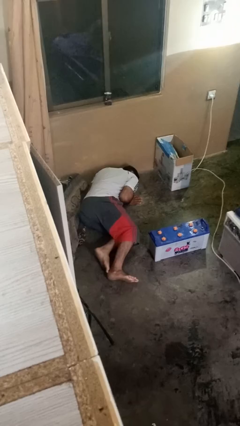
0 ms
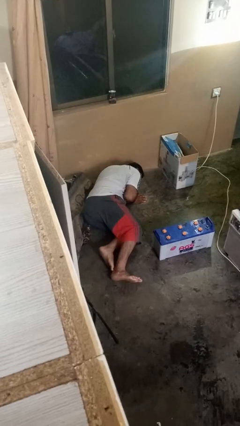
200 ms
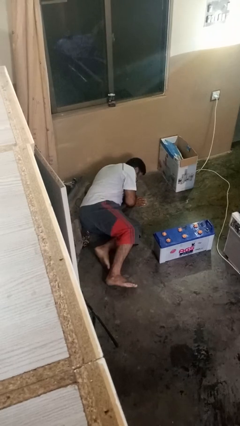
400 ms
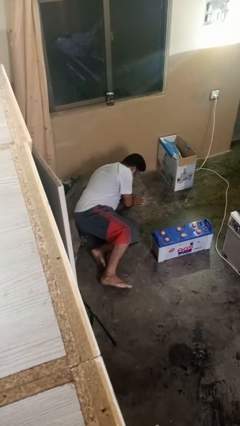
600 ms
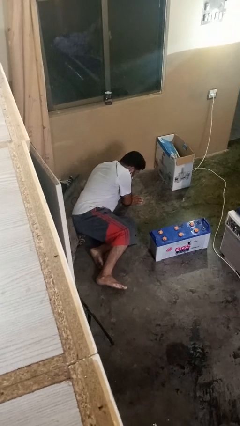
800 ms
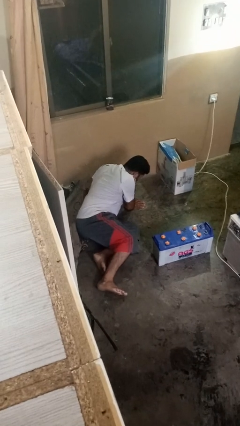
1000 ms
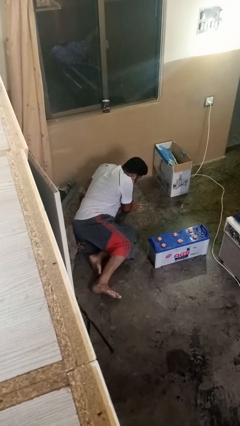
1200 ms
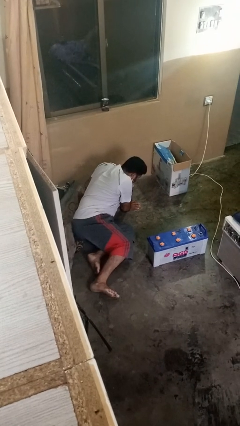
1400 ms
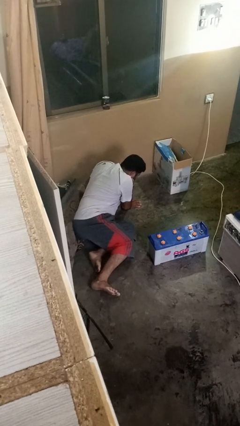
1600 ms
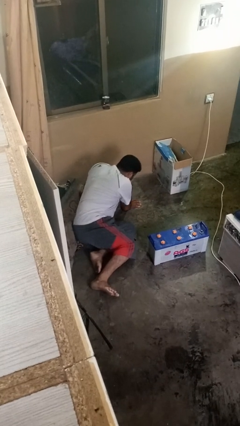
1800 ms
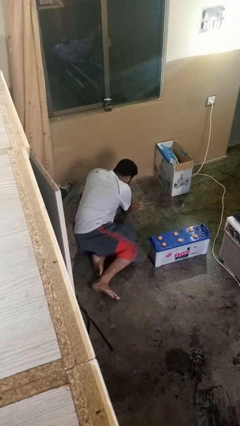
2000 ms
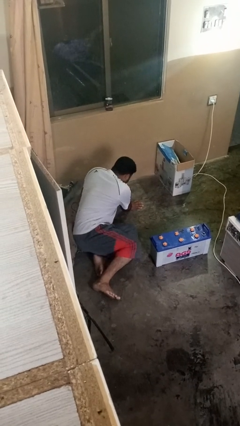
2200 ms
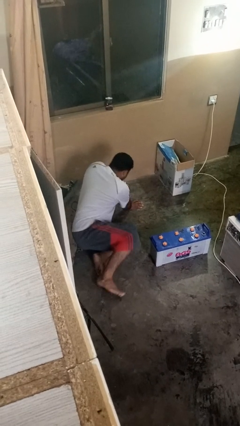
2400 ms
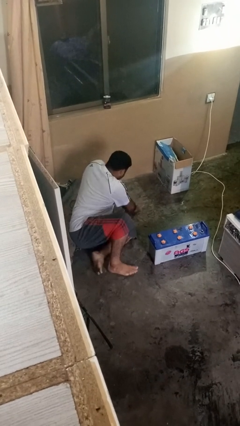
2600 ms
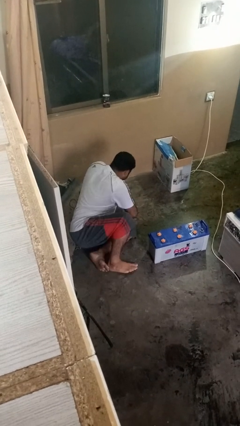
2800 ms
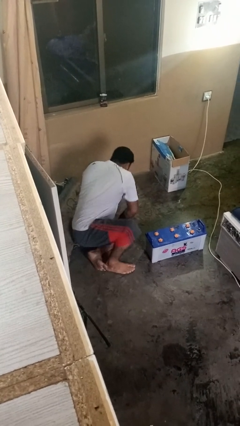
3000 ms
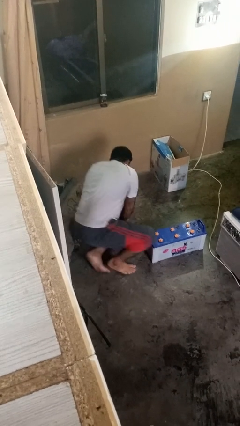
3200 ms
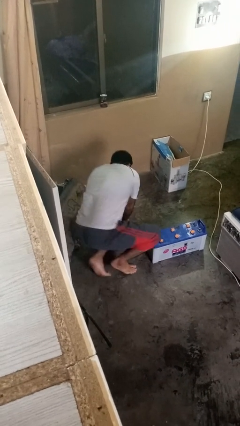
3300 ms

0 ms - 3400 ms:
person lies down on floor

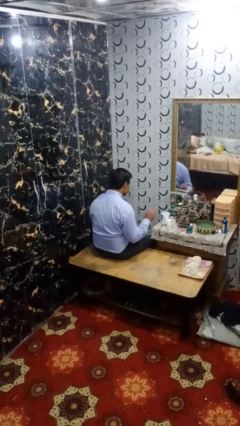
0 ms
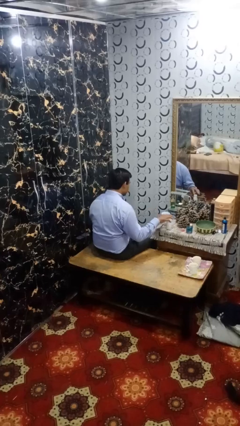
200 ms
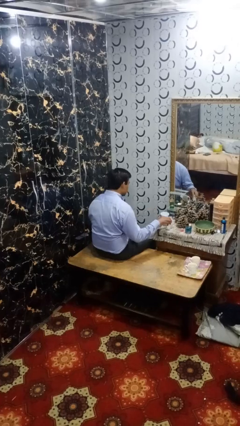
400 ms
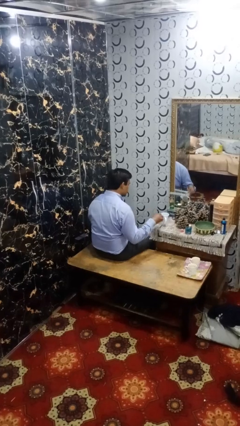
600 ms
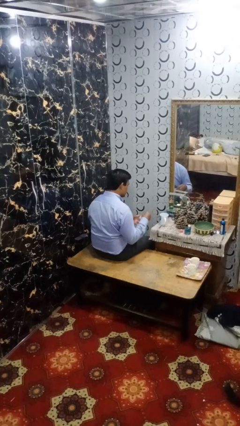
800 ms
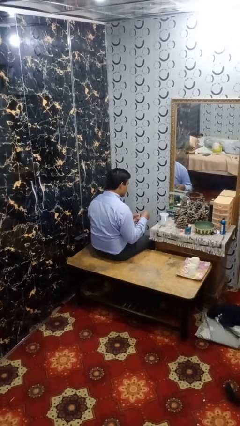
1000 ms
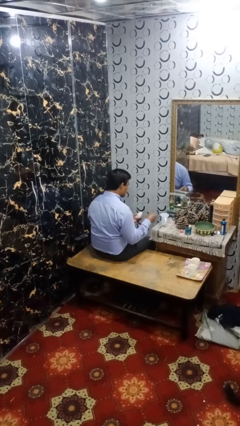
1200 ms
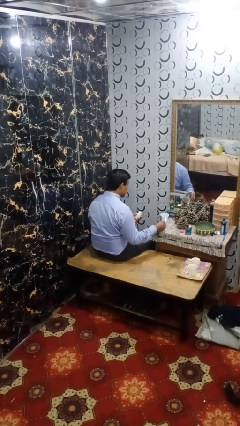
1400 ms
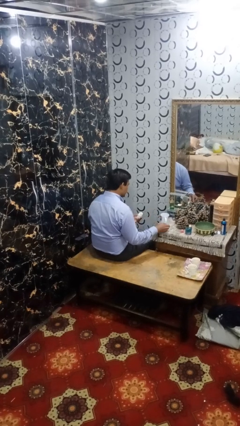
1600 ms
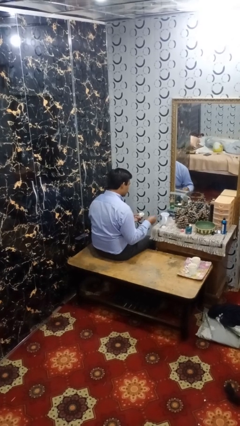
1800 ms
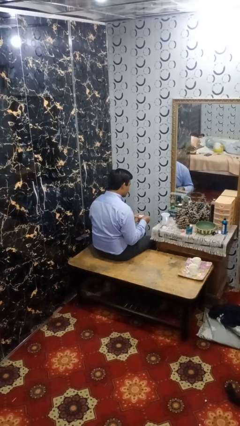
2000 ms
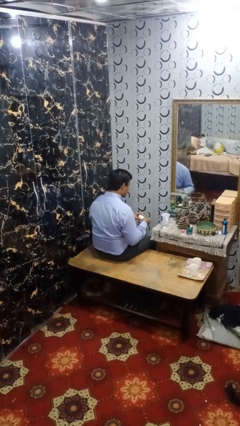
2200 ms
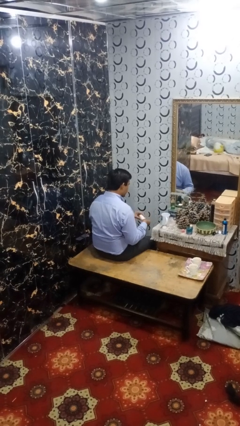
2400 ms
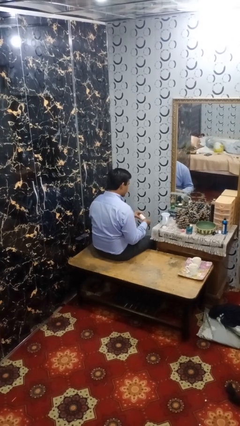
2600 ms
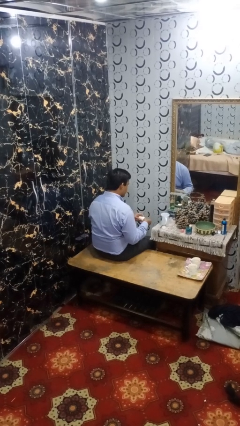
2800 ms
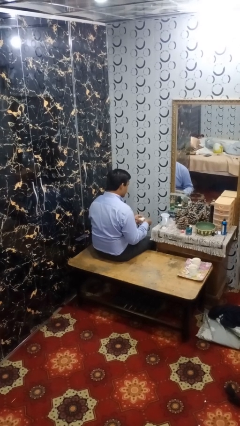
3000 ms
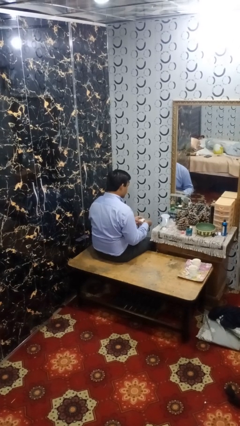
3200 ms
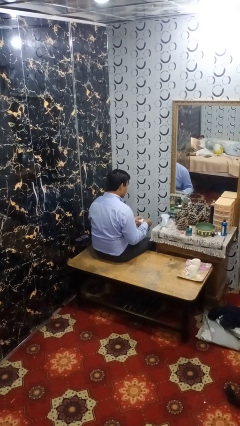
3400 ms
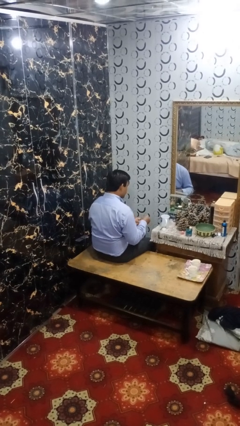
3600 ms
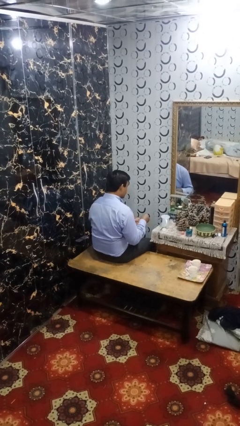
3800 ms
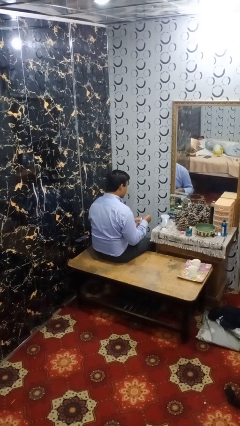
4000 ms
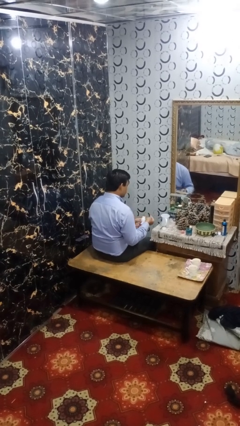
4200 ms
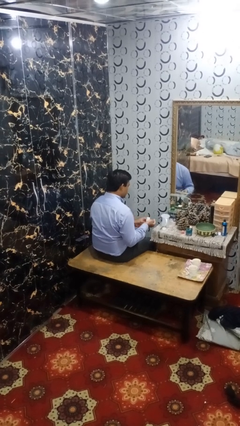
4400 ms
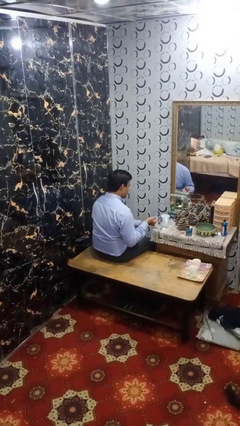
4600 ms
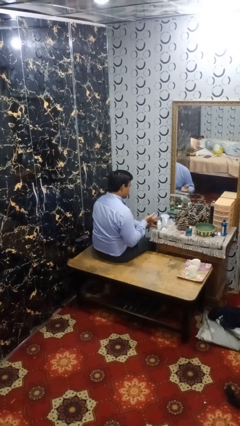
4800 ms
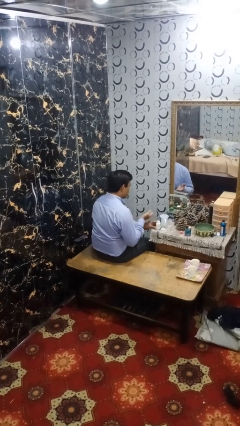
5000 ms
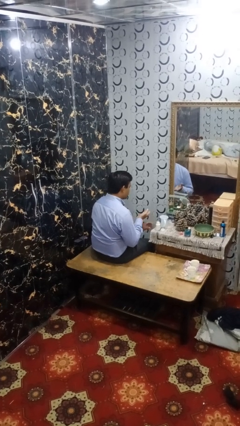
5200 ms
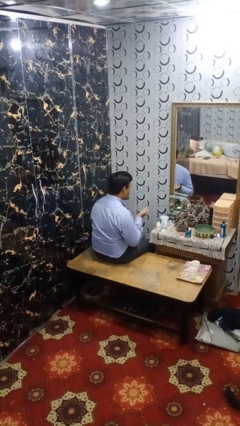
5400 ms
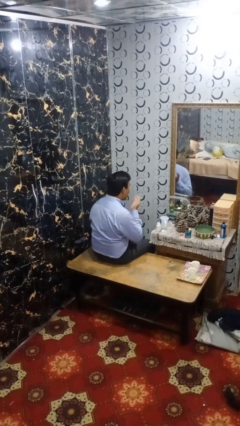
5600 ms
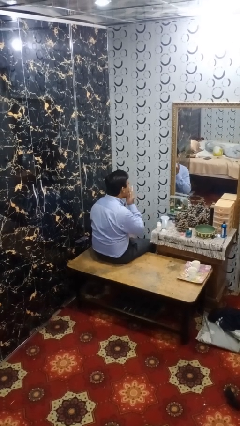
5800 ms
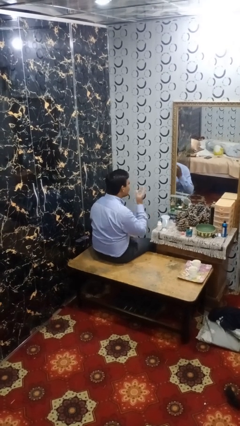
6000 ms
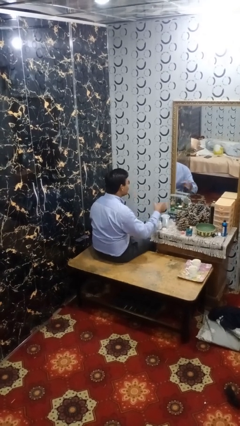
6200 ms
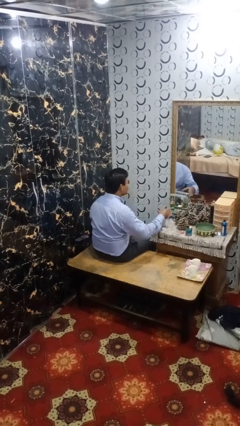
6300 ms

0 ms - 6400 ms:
person takes medicine pills

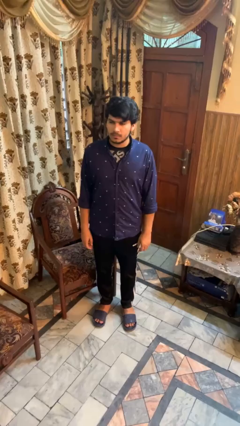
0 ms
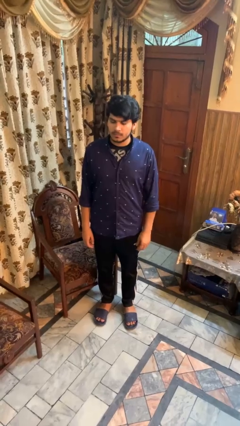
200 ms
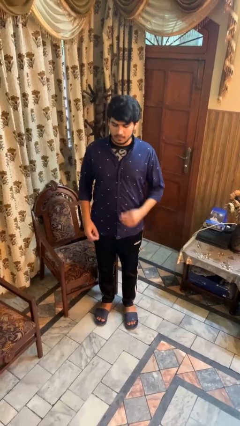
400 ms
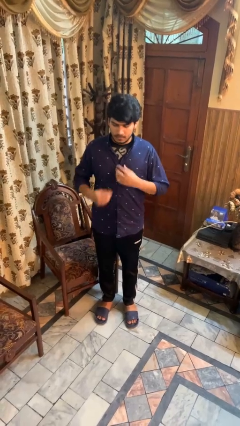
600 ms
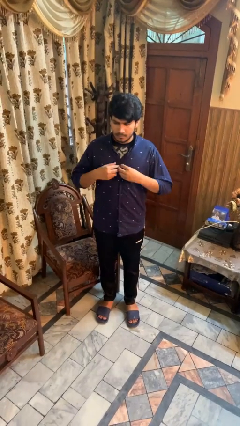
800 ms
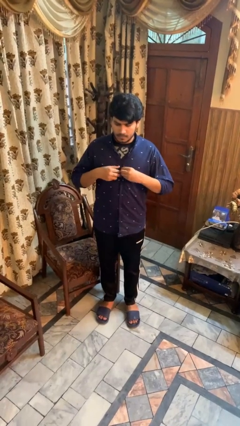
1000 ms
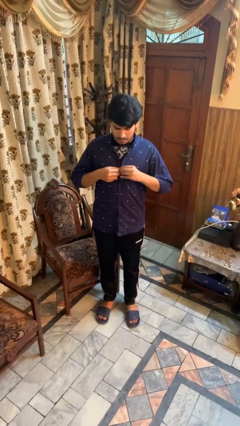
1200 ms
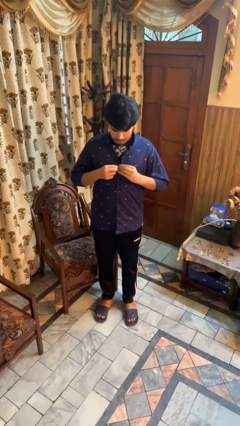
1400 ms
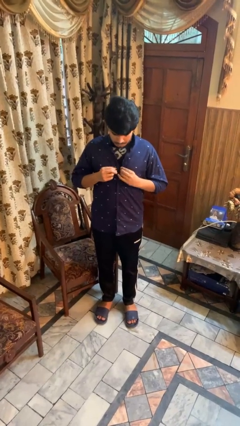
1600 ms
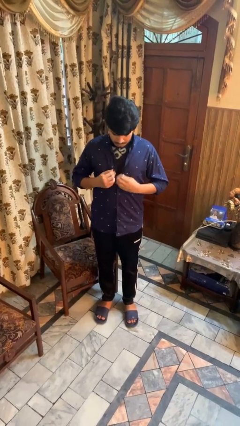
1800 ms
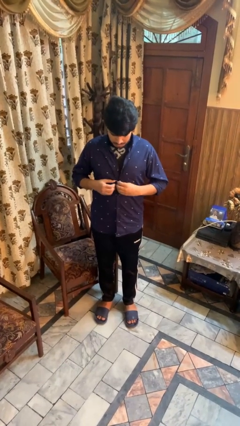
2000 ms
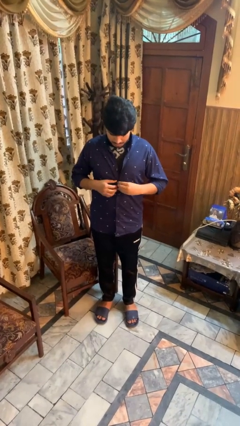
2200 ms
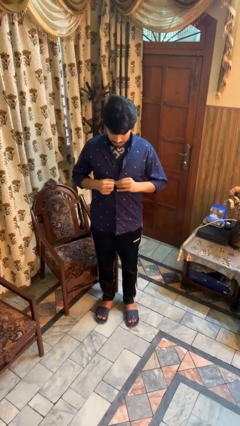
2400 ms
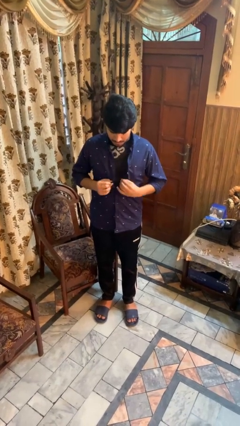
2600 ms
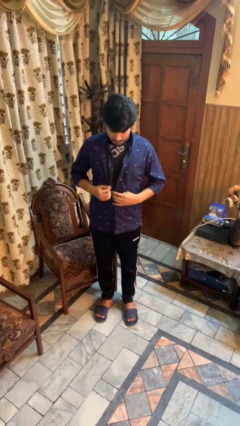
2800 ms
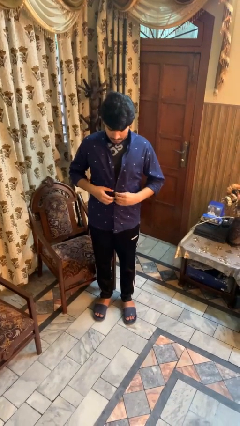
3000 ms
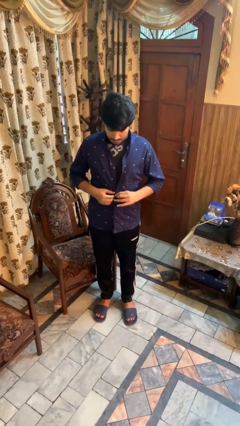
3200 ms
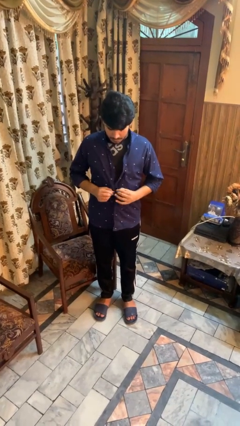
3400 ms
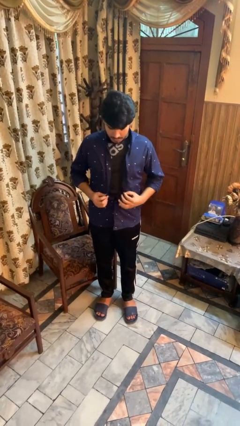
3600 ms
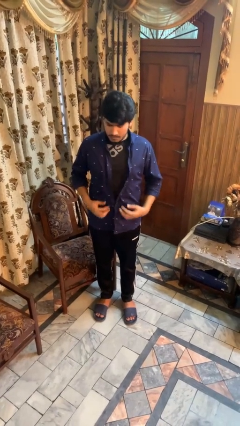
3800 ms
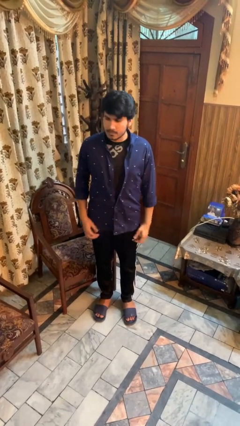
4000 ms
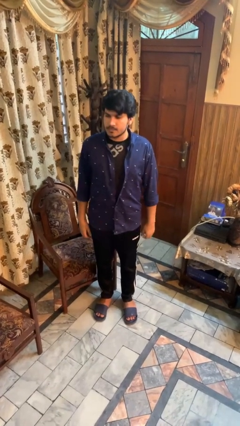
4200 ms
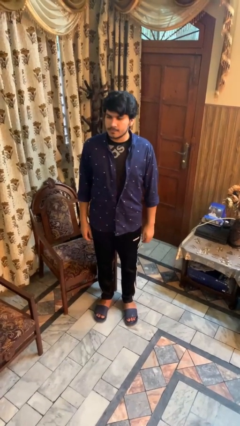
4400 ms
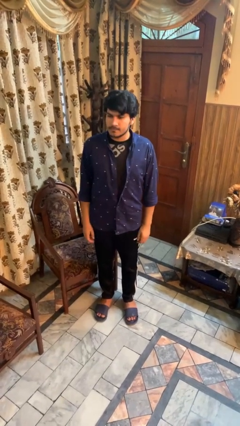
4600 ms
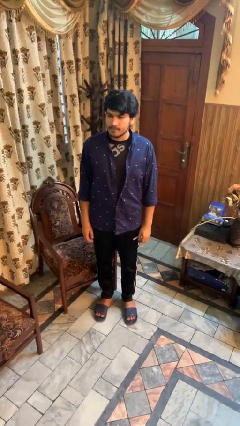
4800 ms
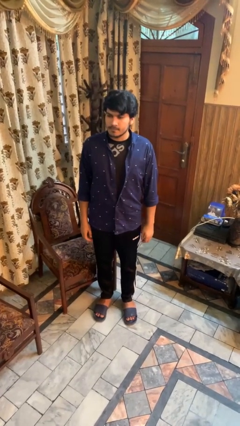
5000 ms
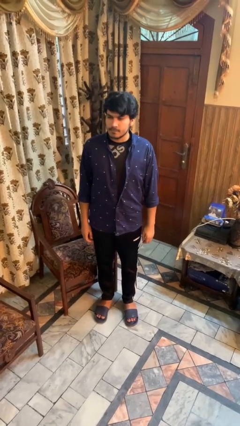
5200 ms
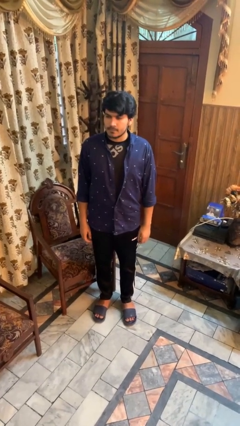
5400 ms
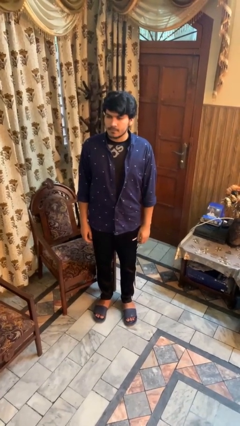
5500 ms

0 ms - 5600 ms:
person unbuttons shirt

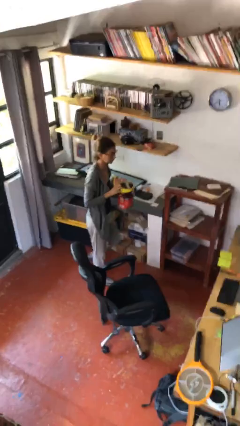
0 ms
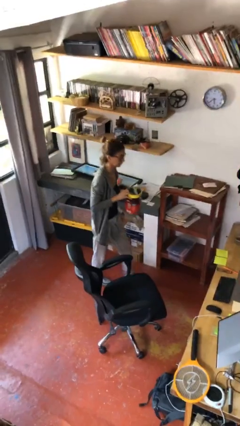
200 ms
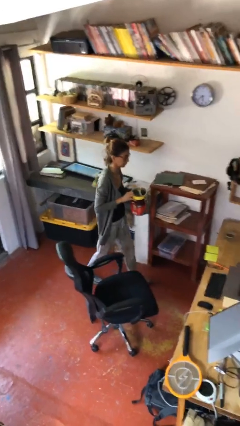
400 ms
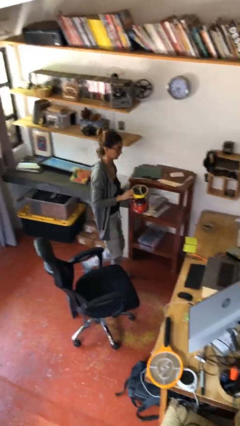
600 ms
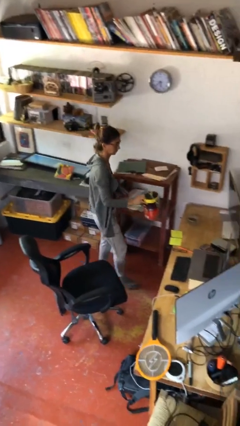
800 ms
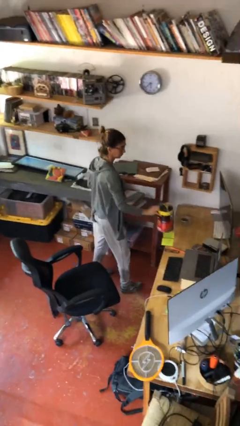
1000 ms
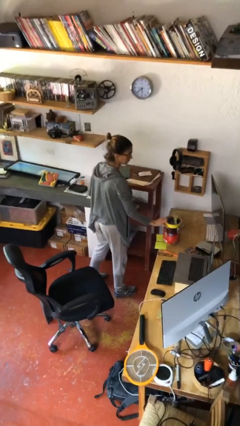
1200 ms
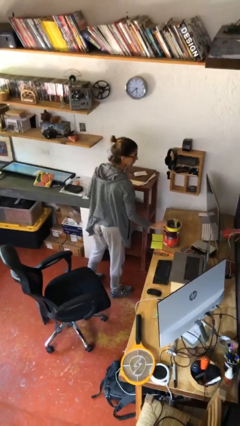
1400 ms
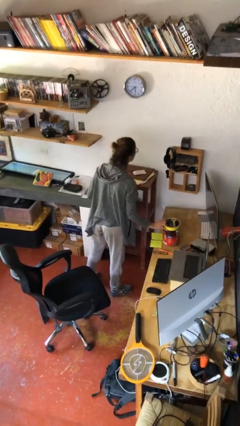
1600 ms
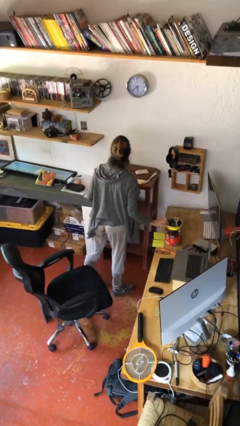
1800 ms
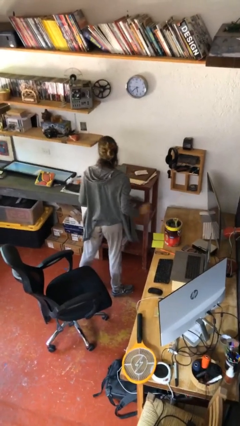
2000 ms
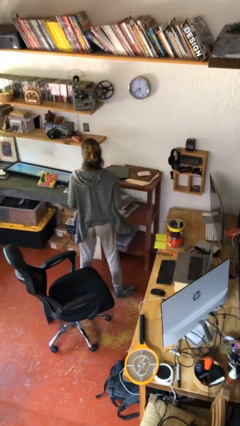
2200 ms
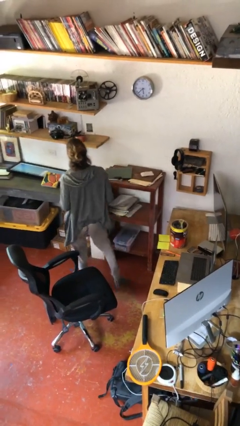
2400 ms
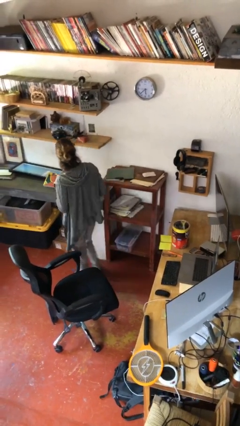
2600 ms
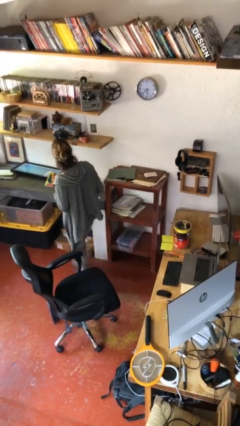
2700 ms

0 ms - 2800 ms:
person puts down object on table
